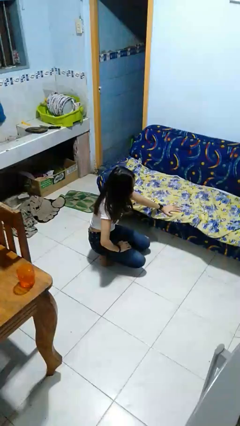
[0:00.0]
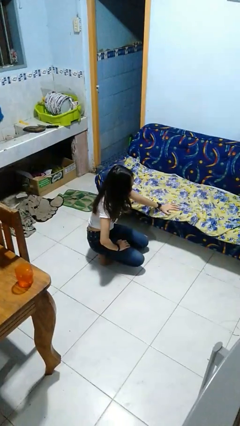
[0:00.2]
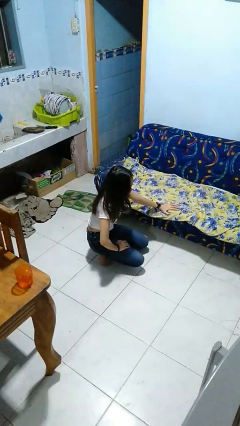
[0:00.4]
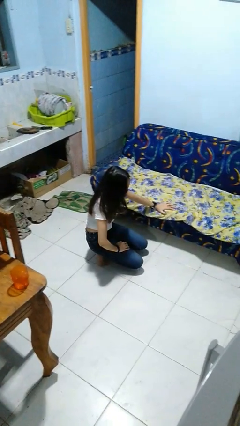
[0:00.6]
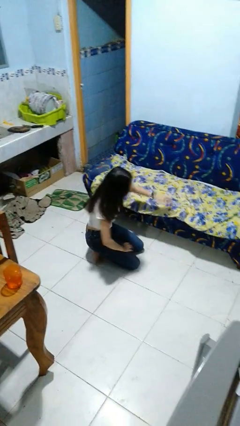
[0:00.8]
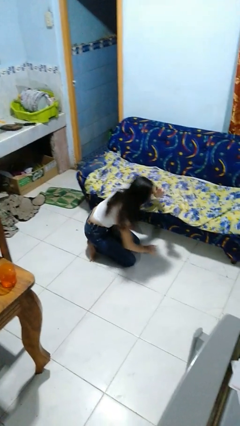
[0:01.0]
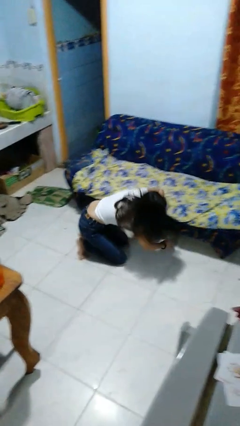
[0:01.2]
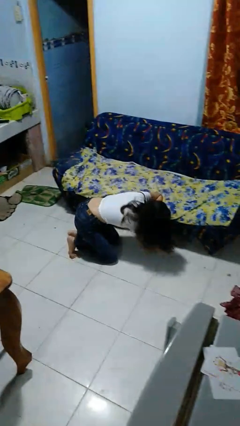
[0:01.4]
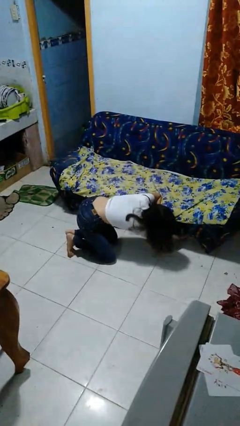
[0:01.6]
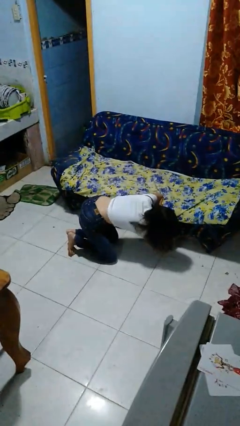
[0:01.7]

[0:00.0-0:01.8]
person searches under couch

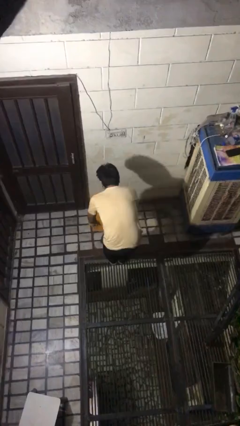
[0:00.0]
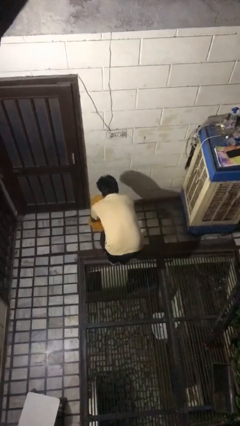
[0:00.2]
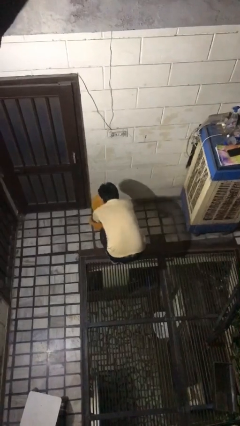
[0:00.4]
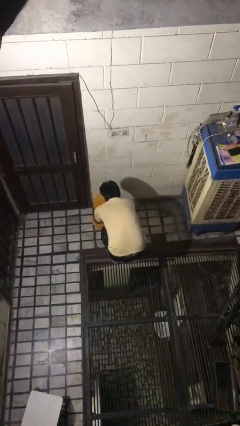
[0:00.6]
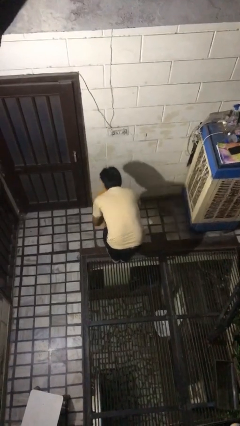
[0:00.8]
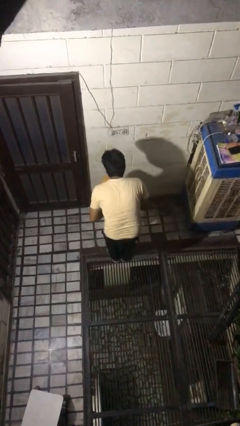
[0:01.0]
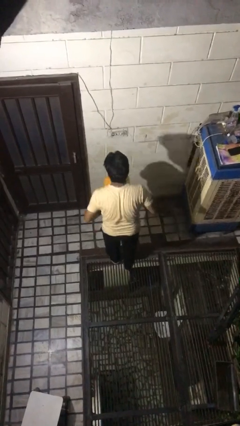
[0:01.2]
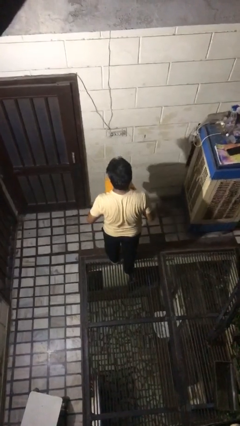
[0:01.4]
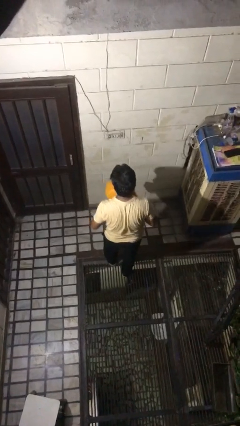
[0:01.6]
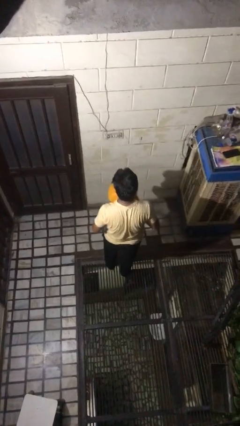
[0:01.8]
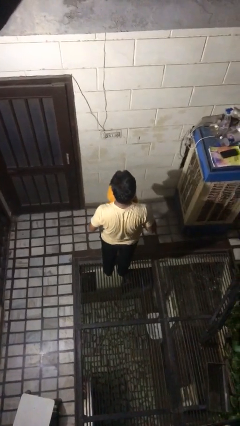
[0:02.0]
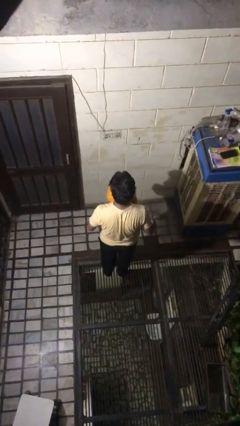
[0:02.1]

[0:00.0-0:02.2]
person picks up object from floor

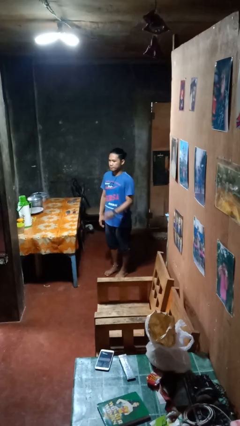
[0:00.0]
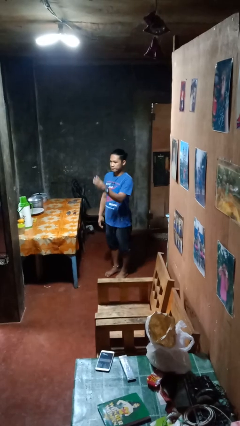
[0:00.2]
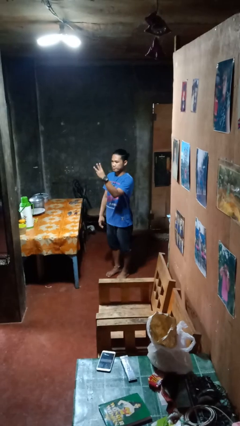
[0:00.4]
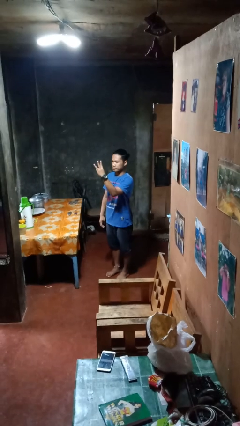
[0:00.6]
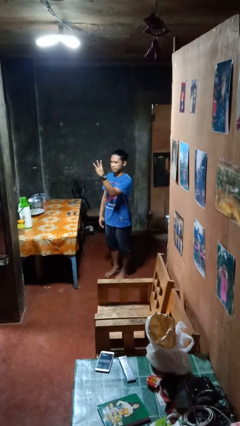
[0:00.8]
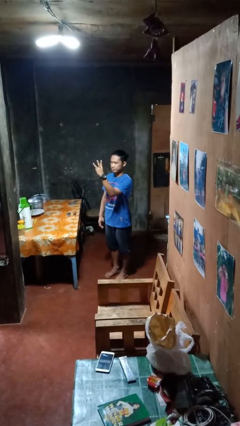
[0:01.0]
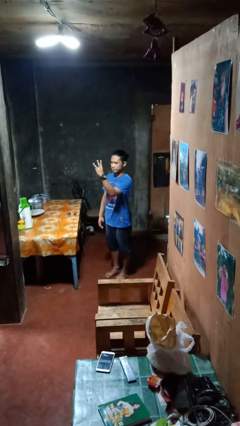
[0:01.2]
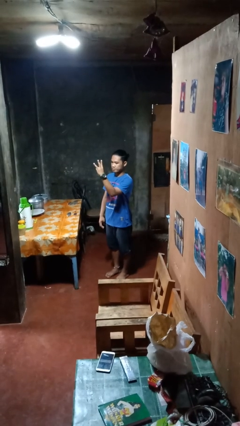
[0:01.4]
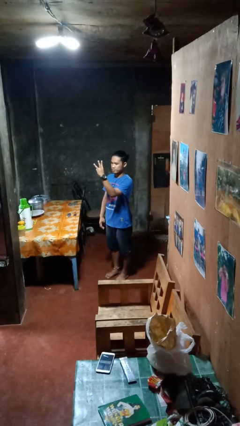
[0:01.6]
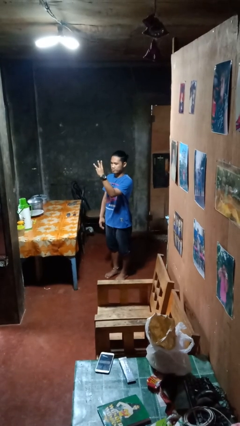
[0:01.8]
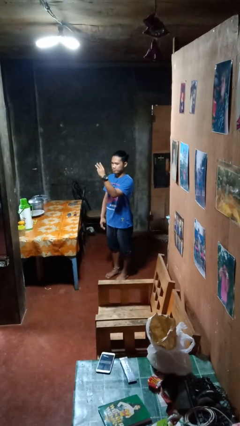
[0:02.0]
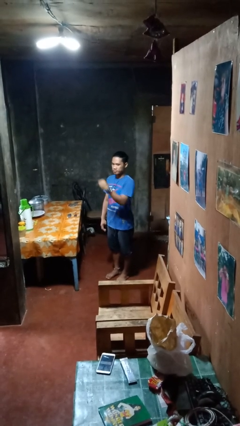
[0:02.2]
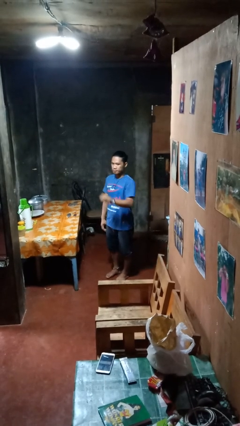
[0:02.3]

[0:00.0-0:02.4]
person gestures number three

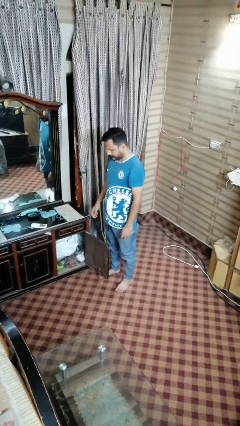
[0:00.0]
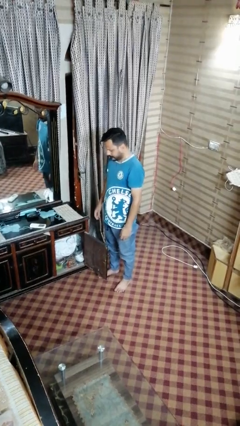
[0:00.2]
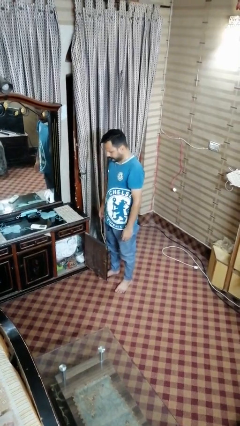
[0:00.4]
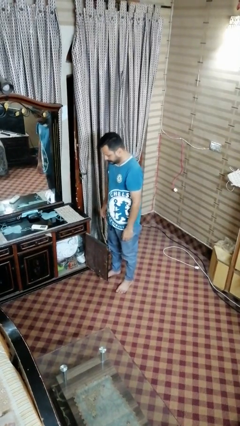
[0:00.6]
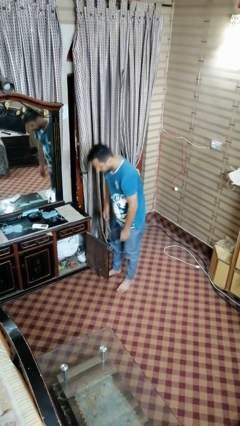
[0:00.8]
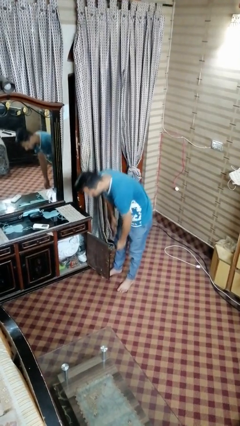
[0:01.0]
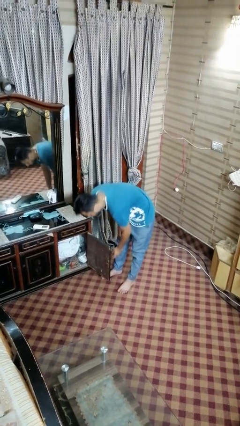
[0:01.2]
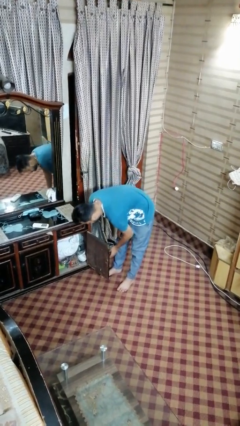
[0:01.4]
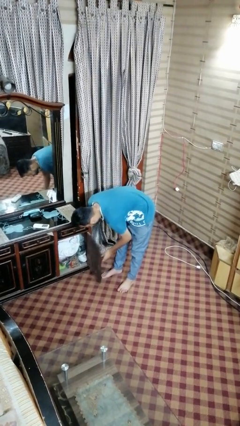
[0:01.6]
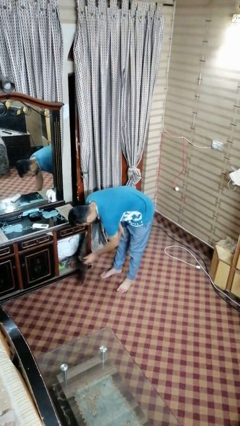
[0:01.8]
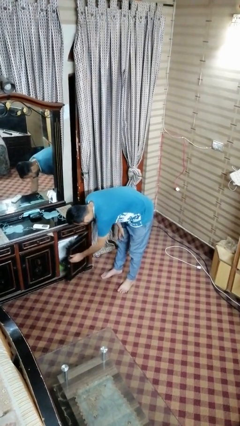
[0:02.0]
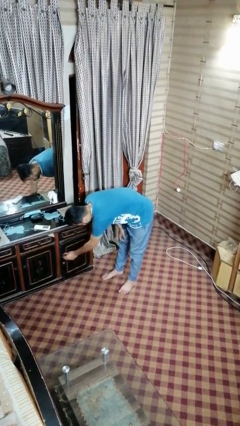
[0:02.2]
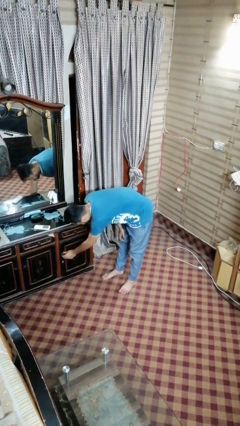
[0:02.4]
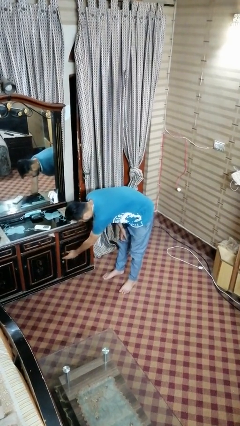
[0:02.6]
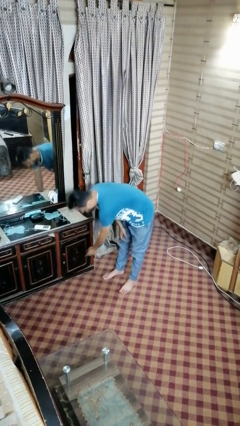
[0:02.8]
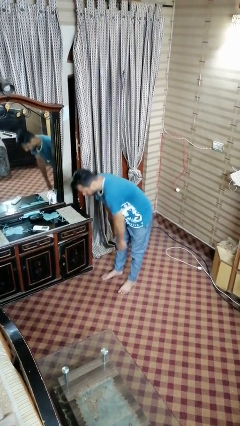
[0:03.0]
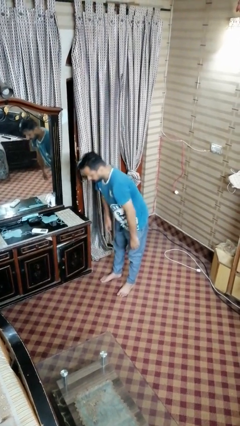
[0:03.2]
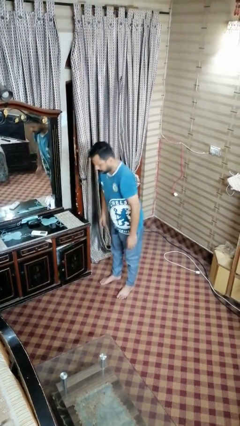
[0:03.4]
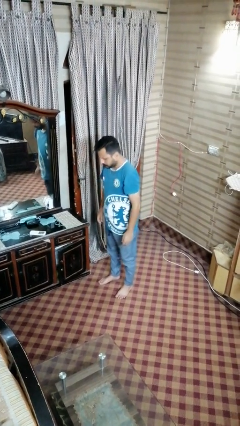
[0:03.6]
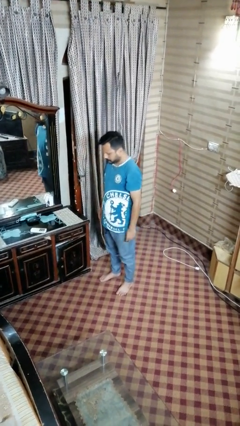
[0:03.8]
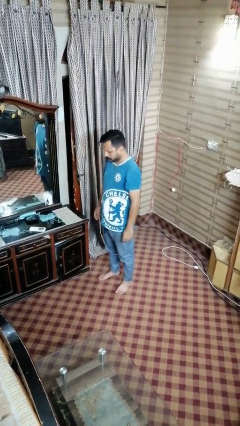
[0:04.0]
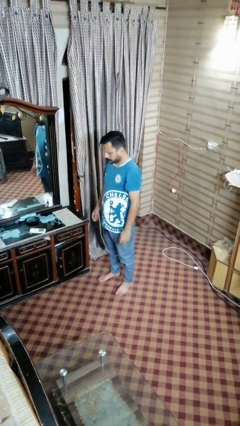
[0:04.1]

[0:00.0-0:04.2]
person closes dresser drawer

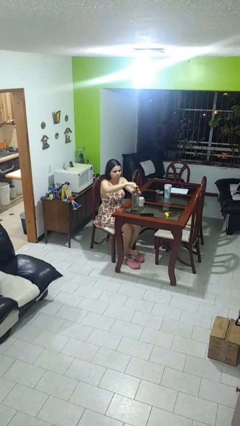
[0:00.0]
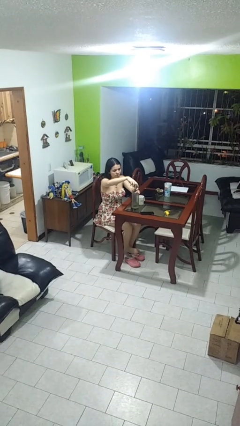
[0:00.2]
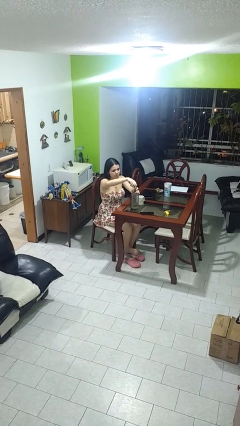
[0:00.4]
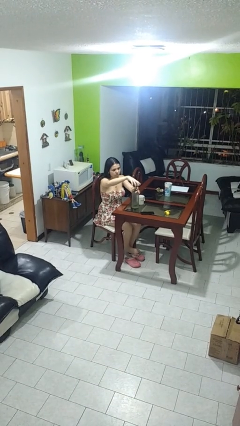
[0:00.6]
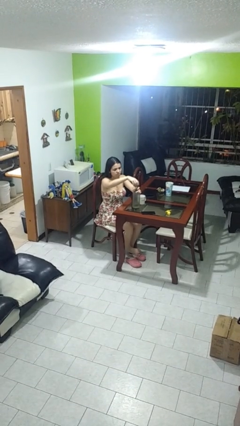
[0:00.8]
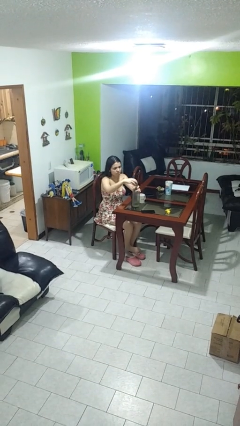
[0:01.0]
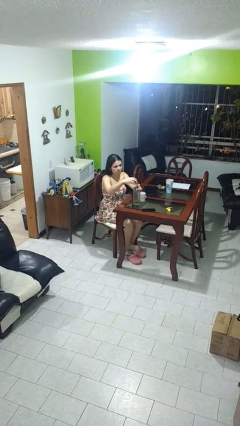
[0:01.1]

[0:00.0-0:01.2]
person unscrews lid from bottle

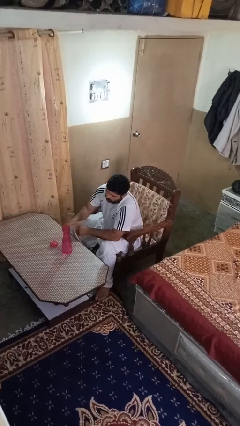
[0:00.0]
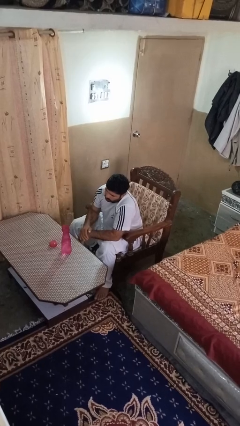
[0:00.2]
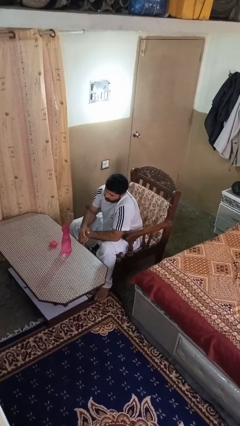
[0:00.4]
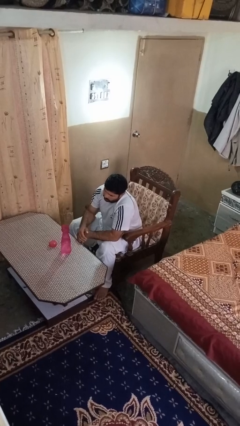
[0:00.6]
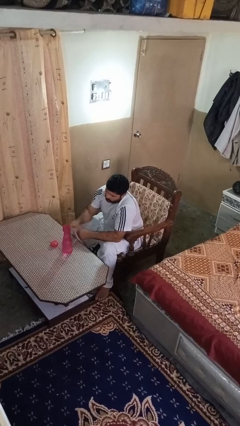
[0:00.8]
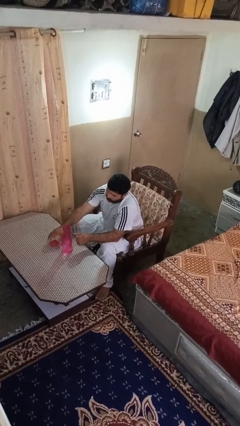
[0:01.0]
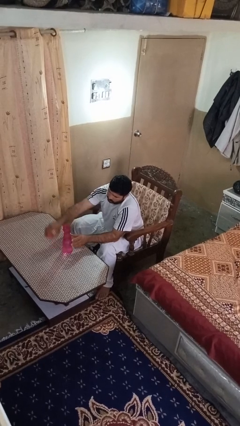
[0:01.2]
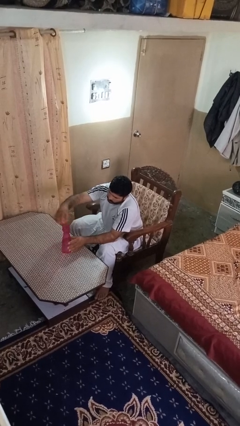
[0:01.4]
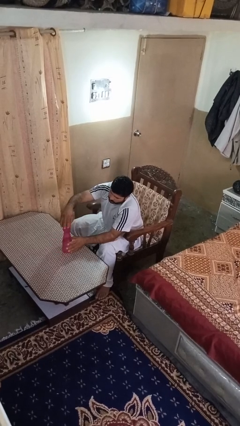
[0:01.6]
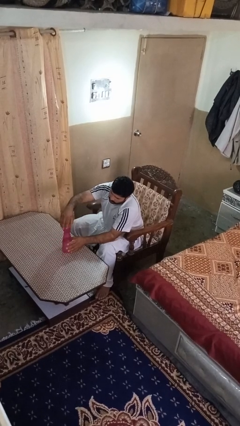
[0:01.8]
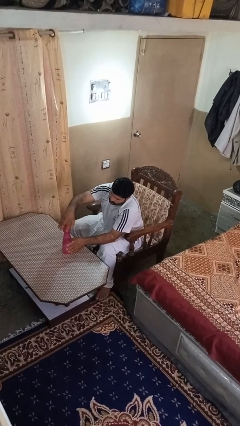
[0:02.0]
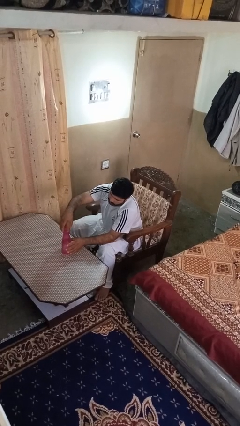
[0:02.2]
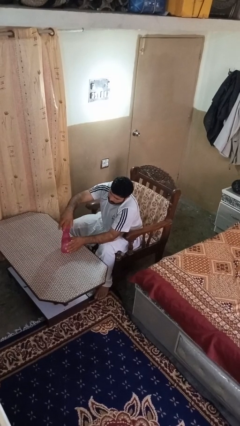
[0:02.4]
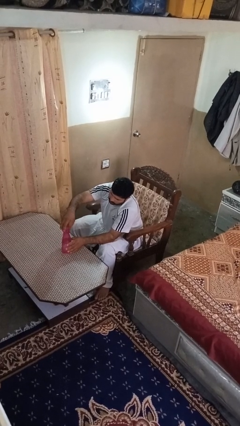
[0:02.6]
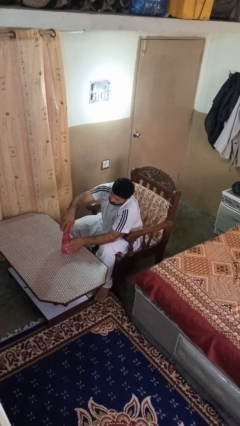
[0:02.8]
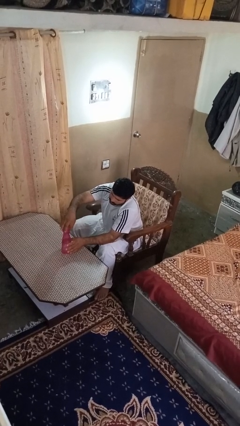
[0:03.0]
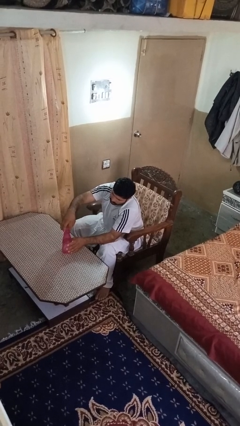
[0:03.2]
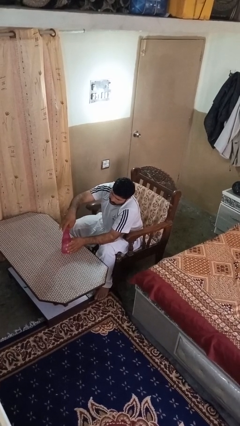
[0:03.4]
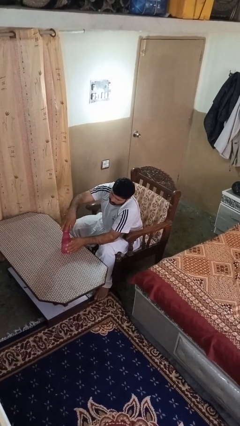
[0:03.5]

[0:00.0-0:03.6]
person screws lid to bottle

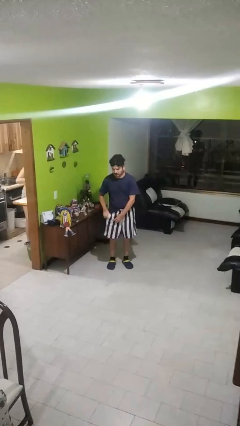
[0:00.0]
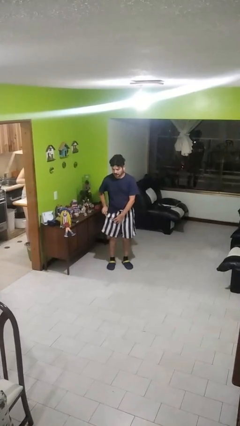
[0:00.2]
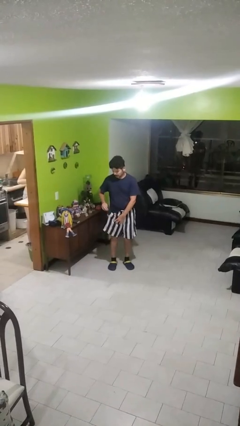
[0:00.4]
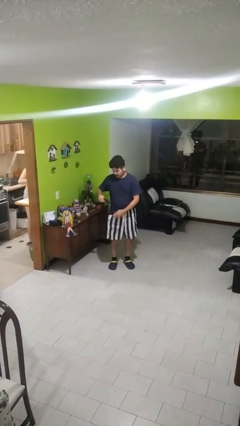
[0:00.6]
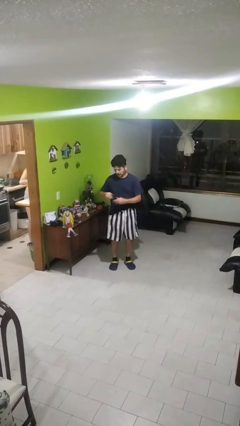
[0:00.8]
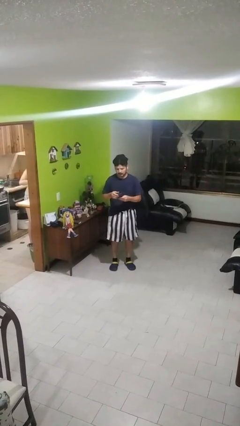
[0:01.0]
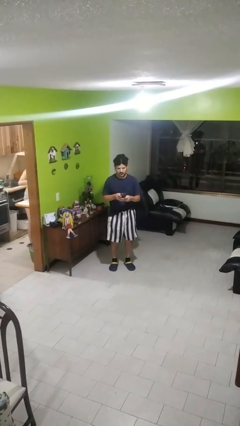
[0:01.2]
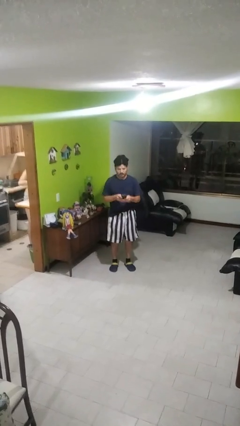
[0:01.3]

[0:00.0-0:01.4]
person takes phone from pocket
